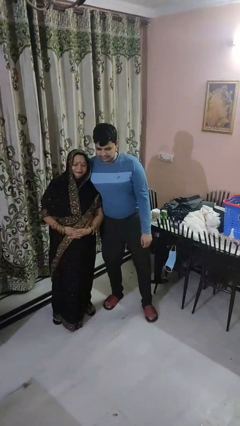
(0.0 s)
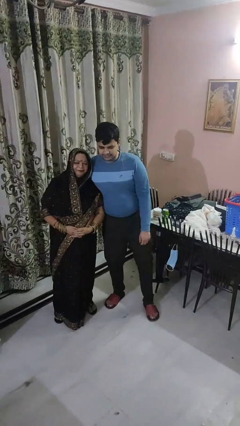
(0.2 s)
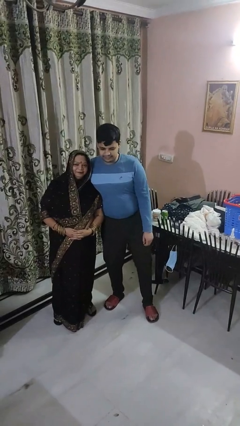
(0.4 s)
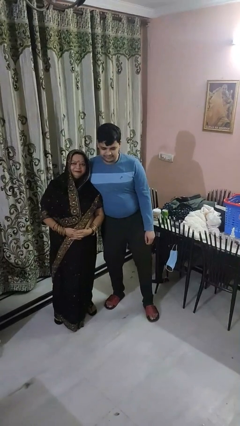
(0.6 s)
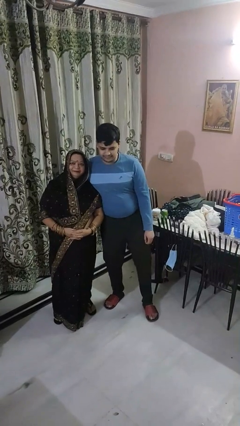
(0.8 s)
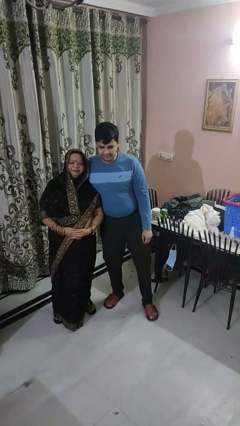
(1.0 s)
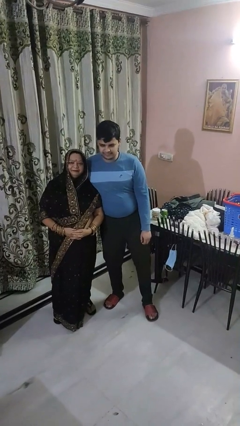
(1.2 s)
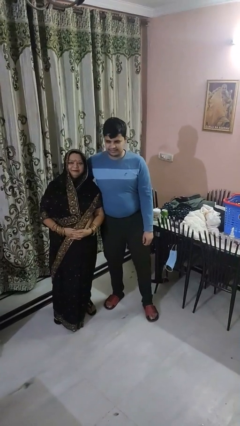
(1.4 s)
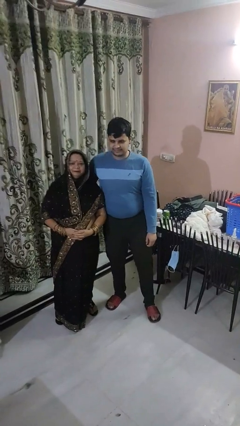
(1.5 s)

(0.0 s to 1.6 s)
person hugs person from side

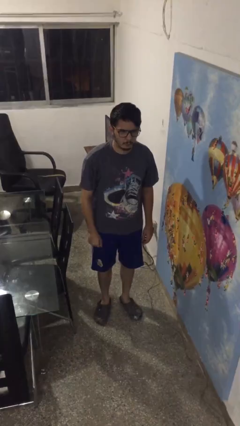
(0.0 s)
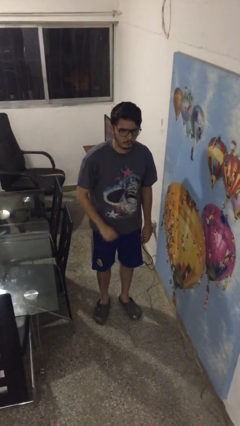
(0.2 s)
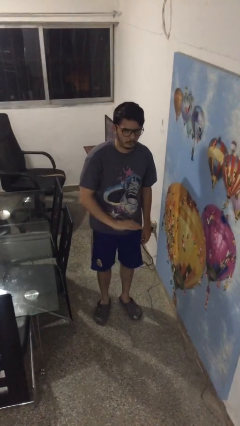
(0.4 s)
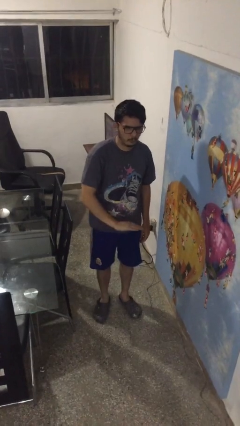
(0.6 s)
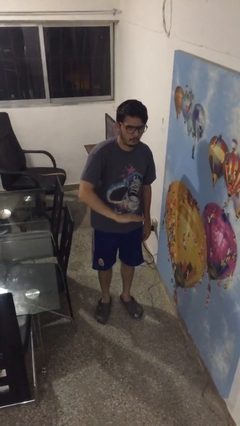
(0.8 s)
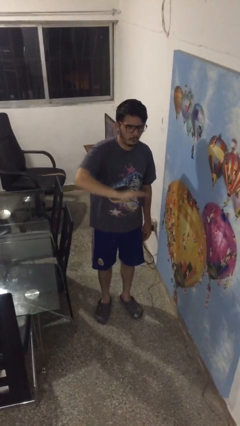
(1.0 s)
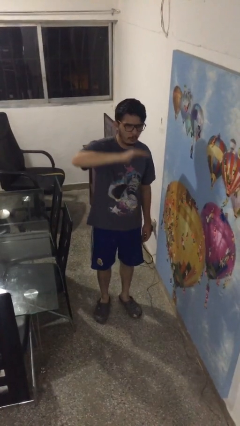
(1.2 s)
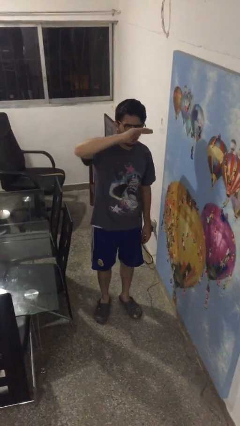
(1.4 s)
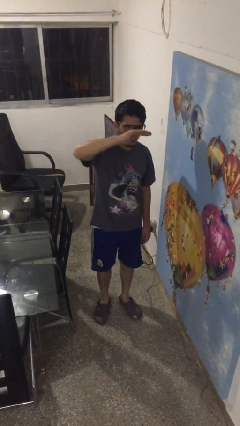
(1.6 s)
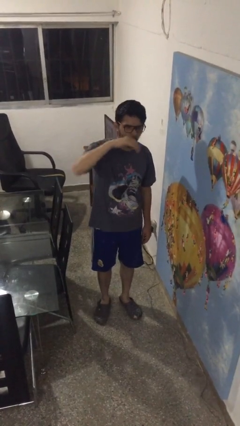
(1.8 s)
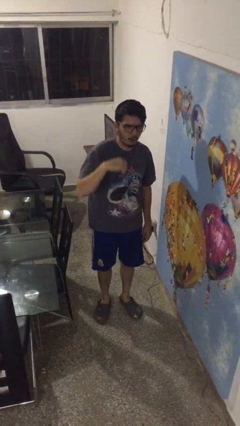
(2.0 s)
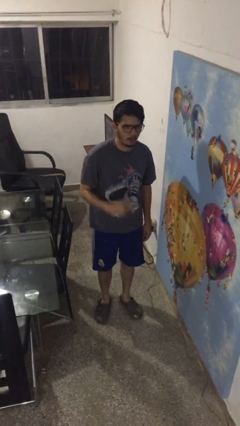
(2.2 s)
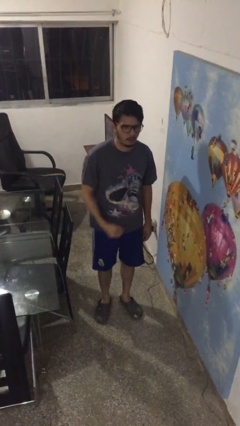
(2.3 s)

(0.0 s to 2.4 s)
person gestures swipe up

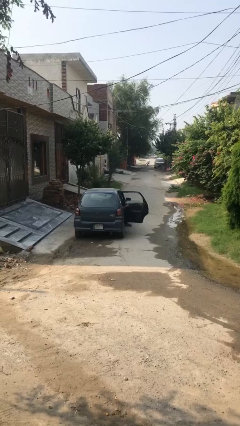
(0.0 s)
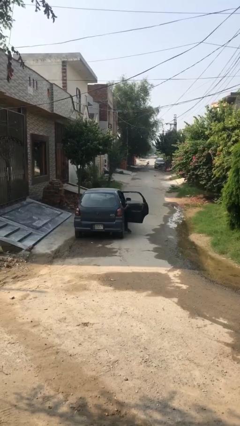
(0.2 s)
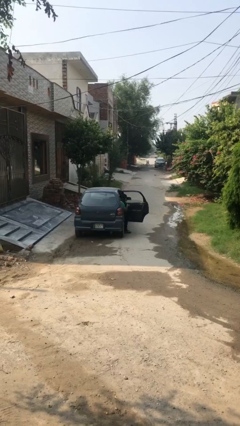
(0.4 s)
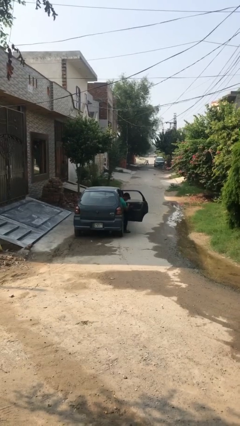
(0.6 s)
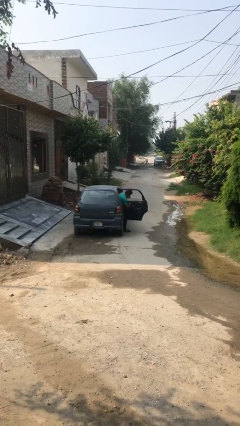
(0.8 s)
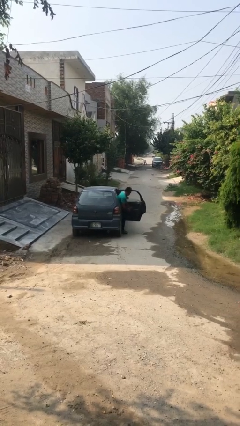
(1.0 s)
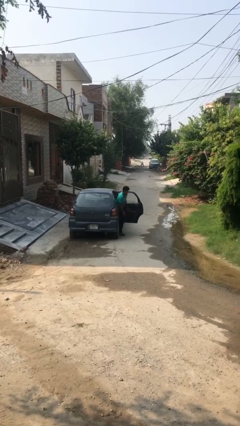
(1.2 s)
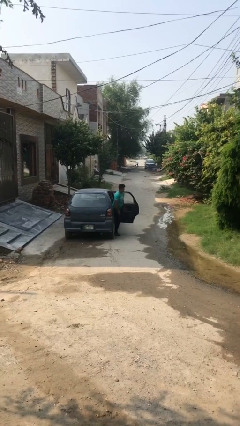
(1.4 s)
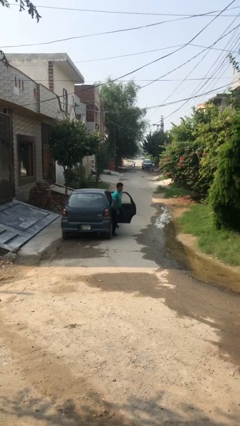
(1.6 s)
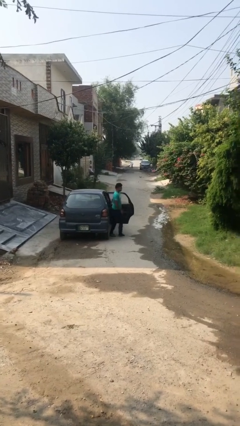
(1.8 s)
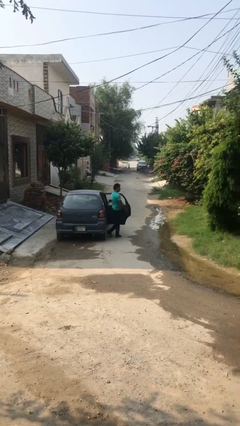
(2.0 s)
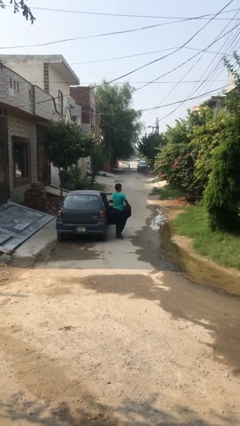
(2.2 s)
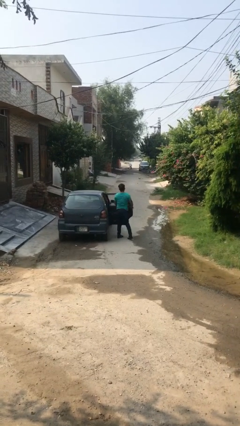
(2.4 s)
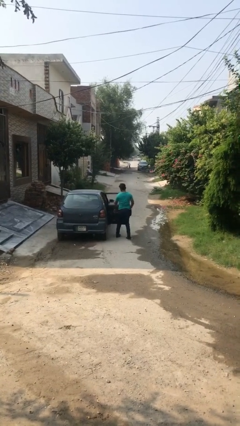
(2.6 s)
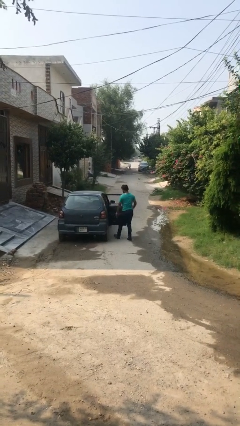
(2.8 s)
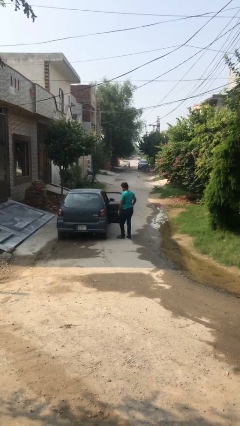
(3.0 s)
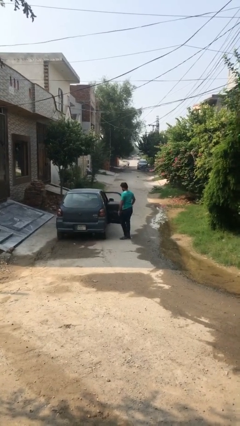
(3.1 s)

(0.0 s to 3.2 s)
person exits car

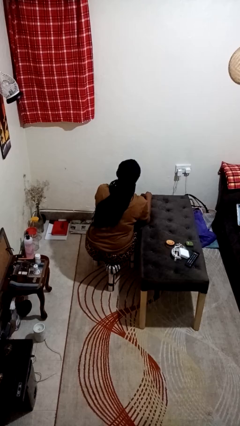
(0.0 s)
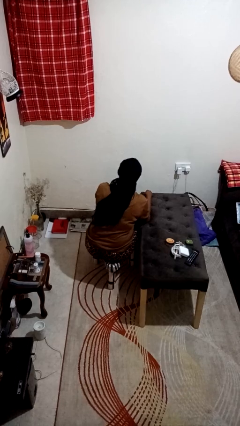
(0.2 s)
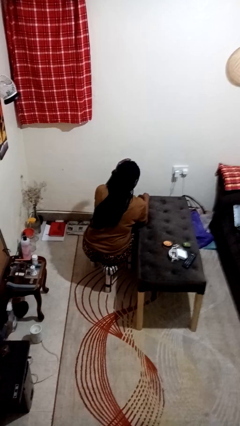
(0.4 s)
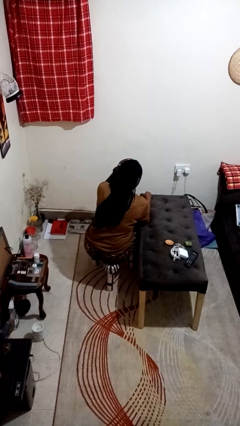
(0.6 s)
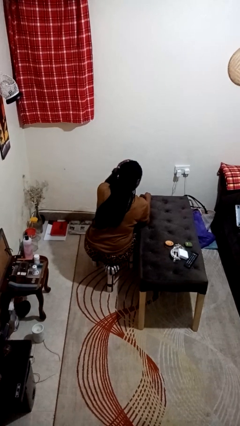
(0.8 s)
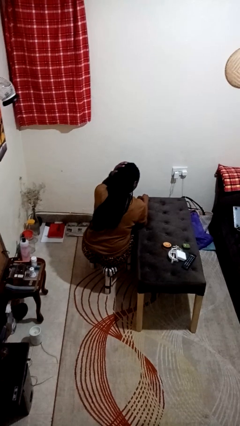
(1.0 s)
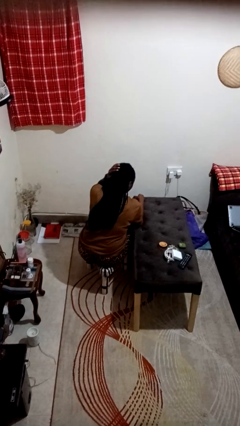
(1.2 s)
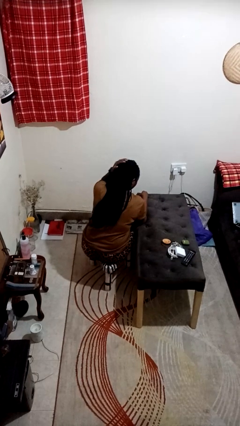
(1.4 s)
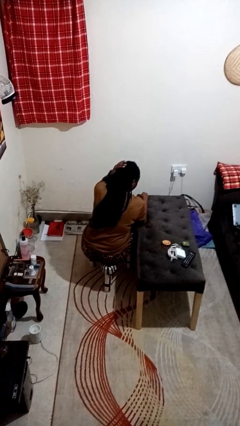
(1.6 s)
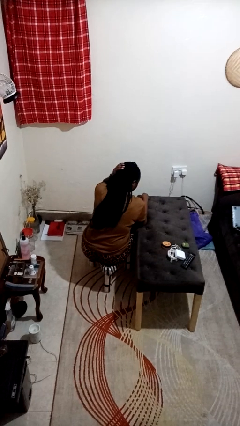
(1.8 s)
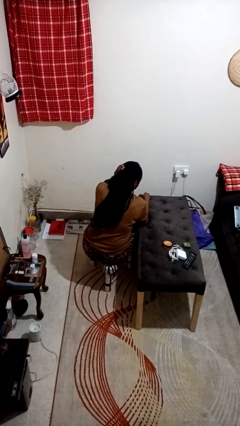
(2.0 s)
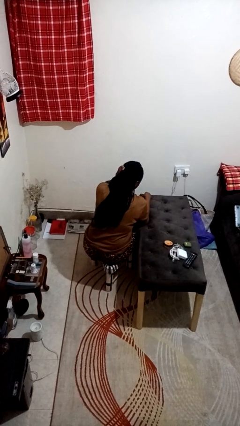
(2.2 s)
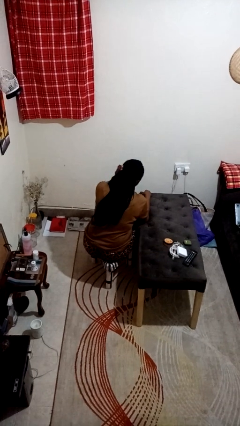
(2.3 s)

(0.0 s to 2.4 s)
person strokes hair

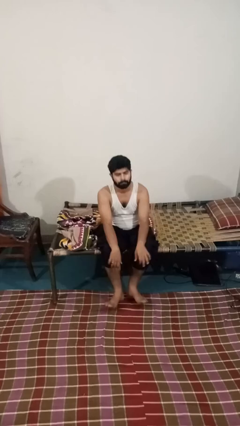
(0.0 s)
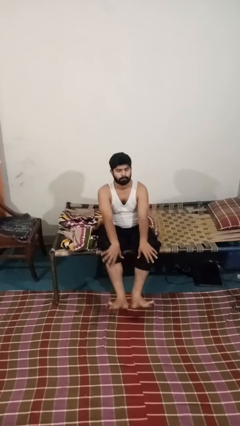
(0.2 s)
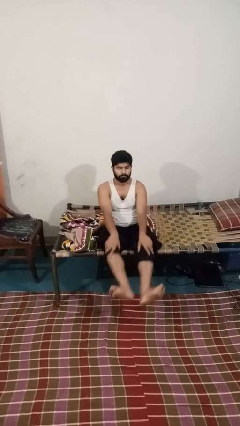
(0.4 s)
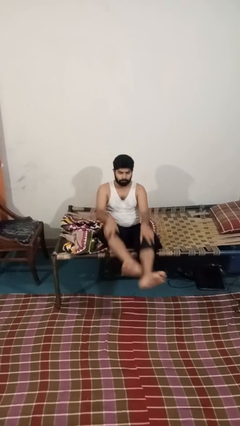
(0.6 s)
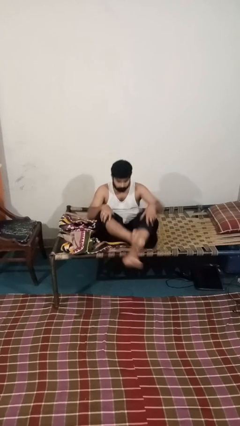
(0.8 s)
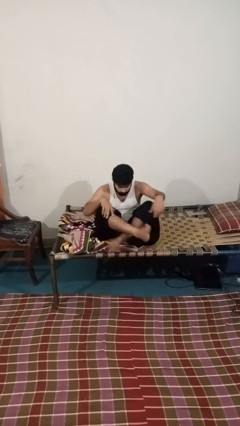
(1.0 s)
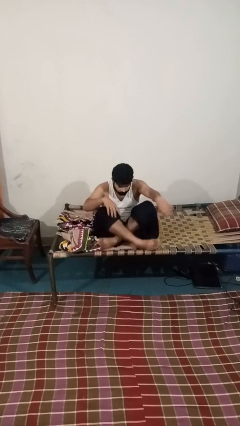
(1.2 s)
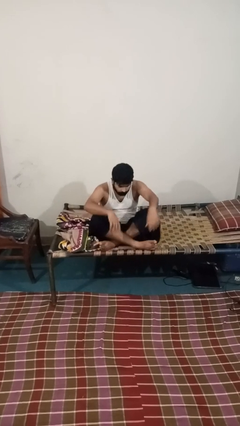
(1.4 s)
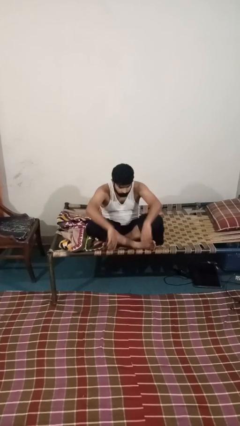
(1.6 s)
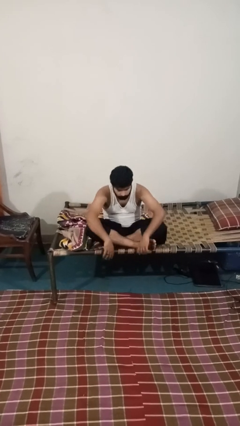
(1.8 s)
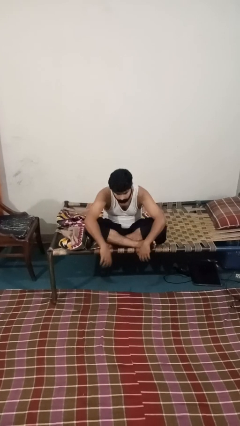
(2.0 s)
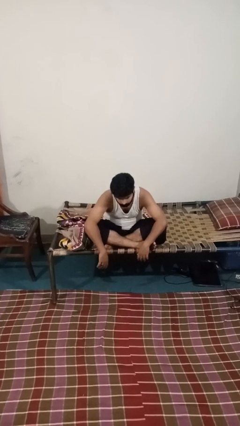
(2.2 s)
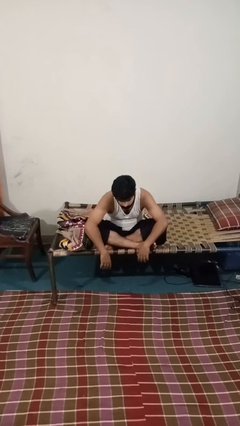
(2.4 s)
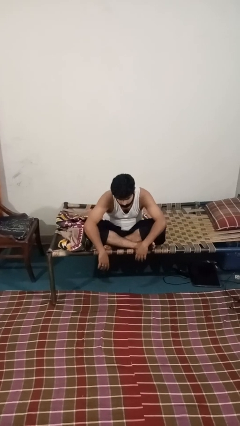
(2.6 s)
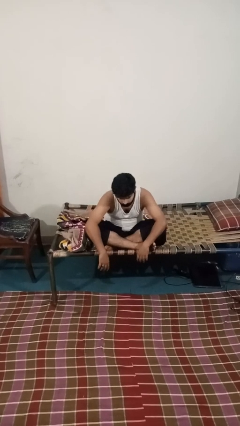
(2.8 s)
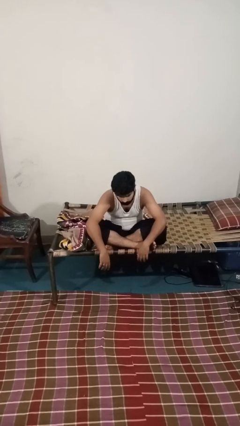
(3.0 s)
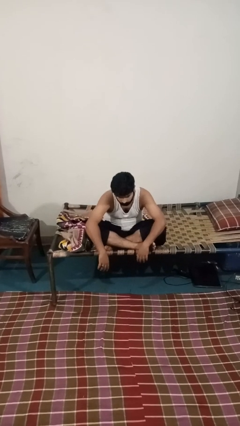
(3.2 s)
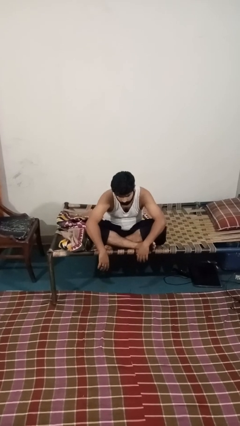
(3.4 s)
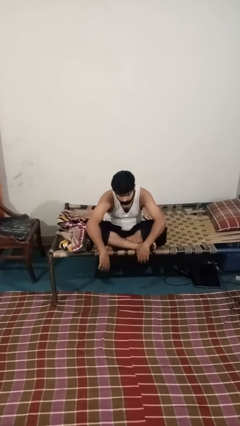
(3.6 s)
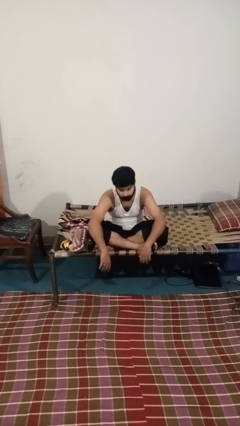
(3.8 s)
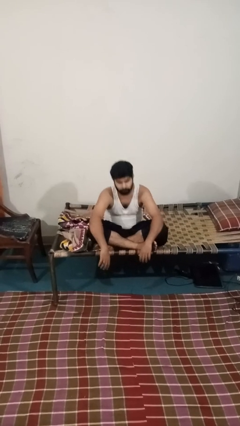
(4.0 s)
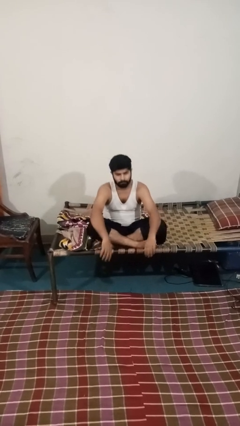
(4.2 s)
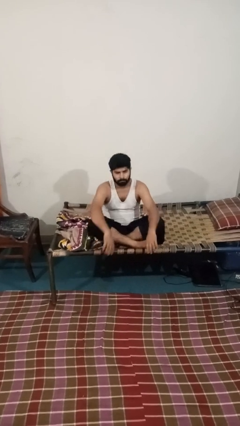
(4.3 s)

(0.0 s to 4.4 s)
person crosses legs

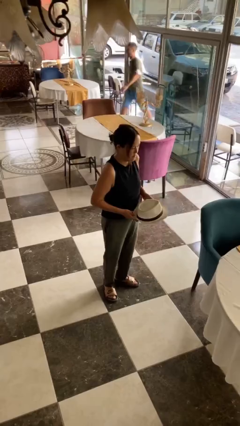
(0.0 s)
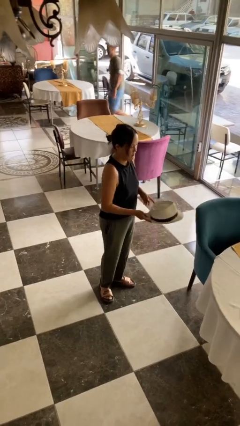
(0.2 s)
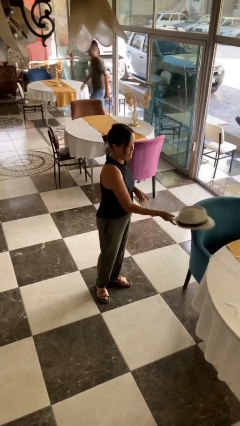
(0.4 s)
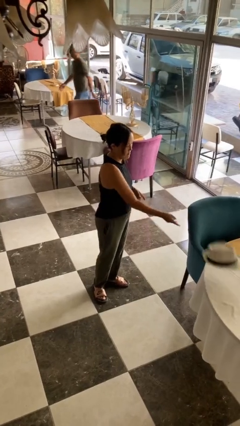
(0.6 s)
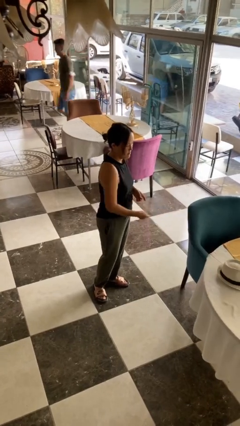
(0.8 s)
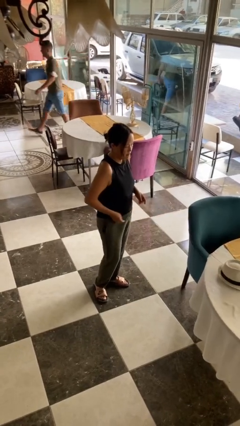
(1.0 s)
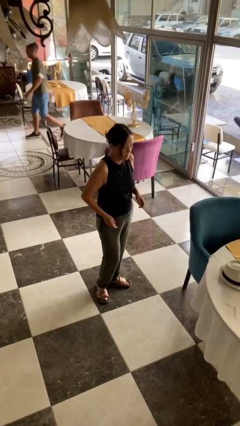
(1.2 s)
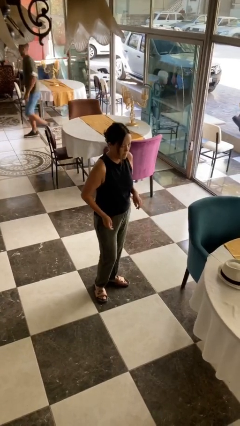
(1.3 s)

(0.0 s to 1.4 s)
person throws object on table

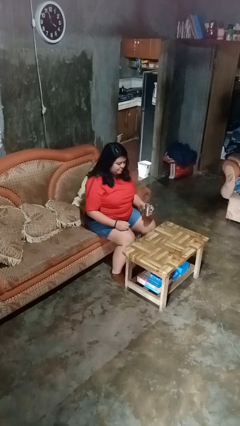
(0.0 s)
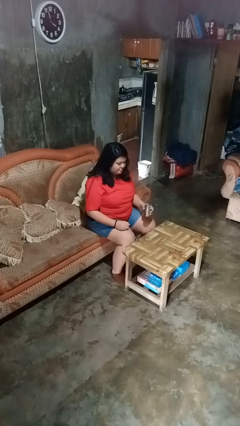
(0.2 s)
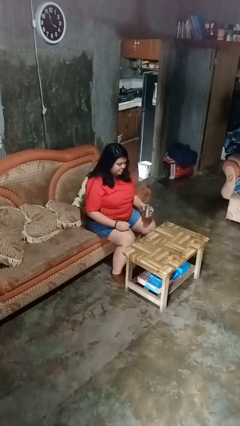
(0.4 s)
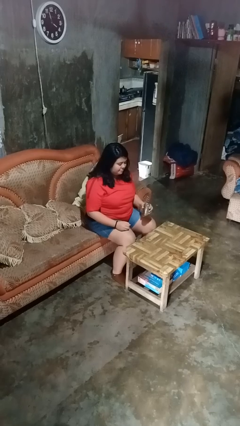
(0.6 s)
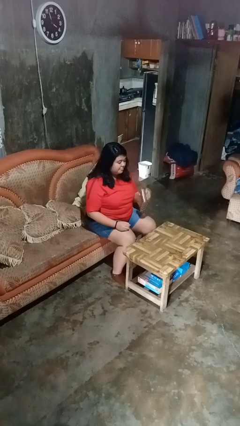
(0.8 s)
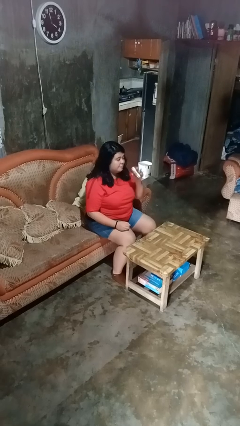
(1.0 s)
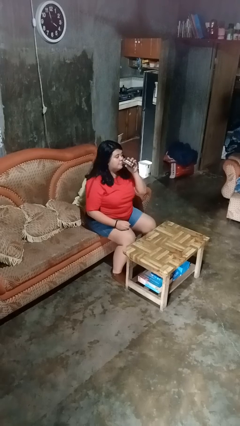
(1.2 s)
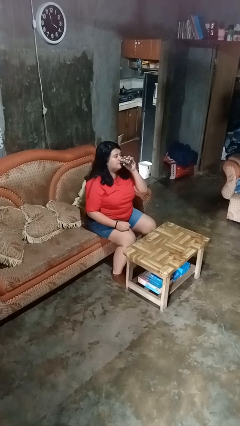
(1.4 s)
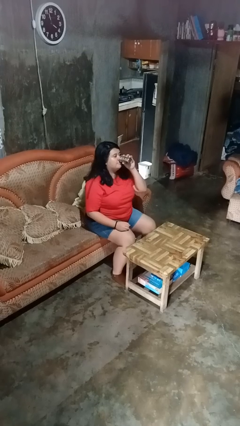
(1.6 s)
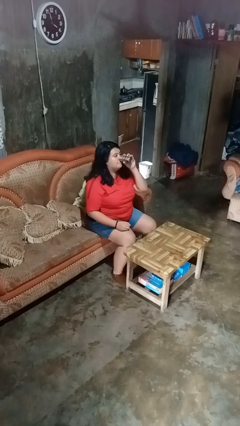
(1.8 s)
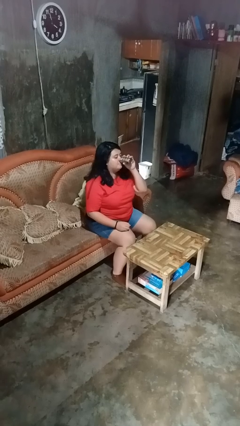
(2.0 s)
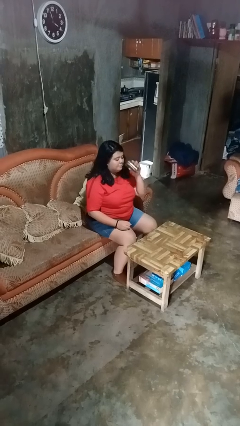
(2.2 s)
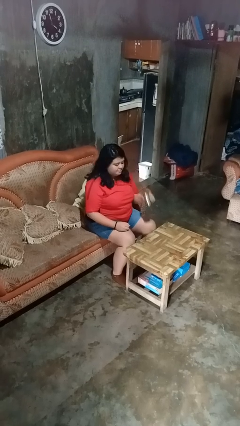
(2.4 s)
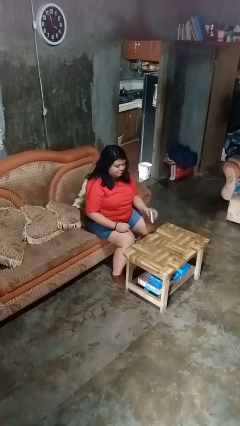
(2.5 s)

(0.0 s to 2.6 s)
person drinks from beverage can
